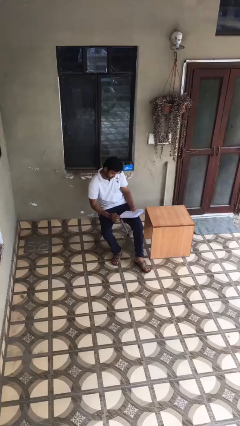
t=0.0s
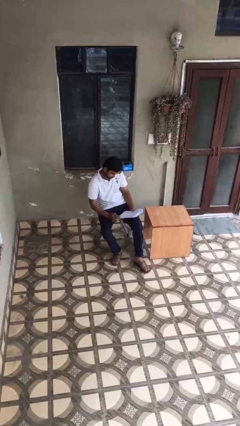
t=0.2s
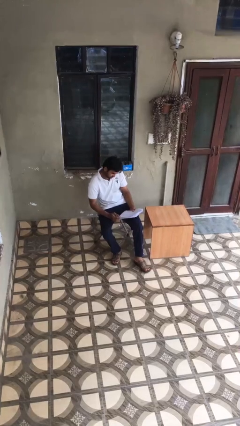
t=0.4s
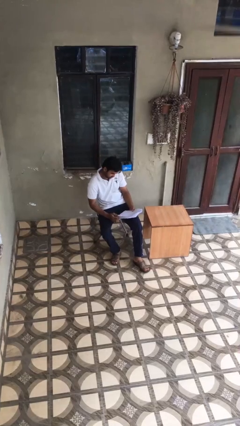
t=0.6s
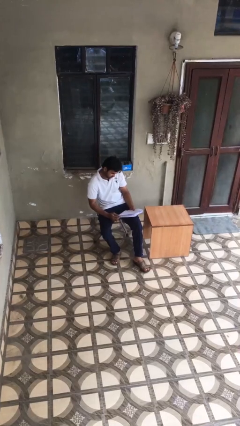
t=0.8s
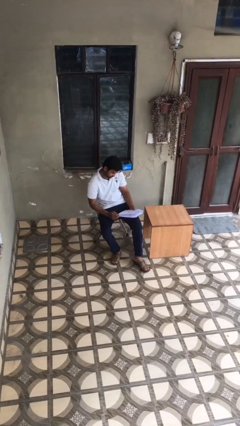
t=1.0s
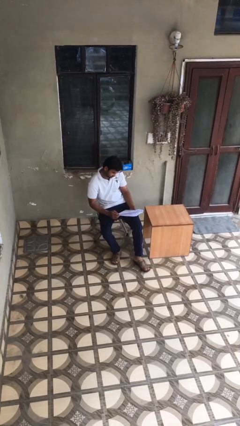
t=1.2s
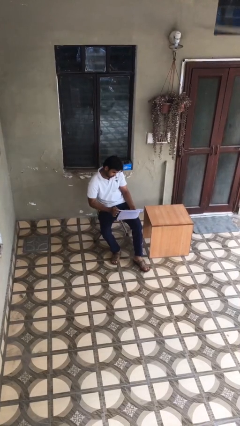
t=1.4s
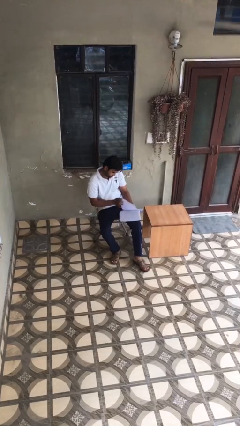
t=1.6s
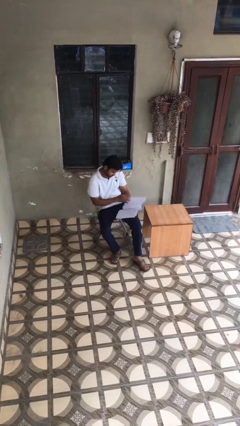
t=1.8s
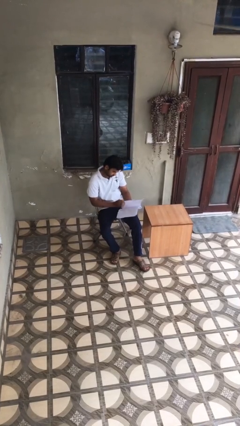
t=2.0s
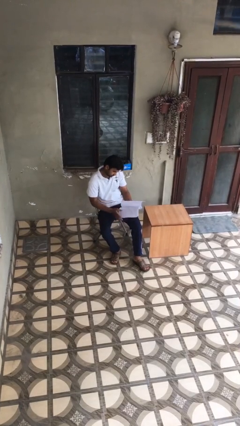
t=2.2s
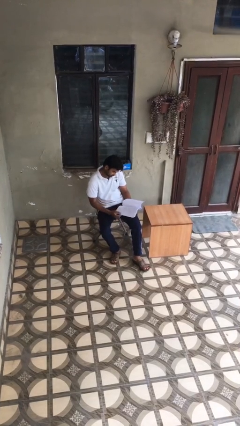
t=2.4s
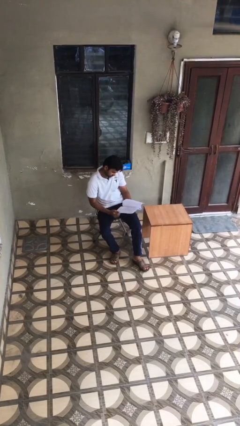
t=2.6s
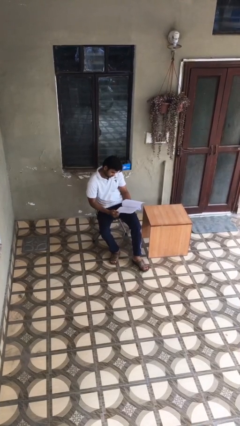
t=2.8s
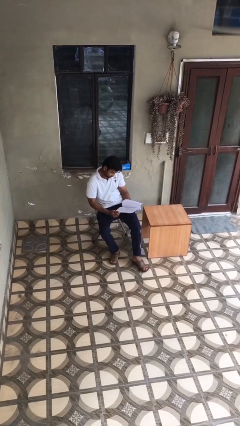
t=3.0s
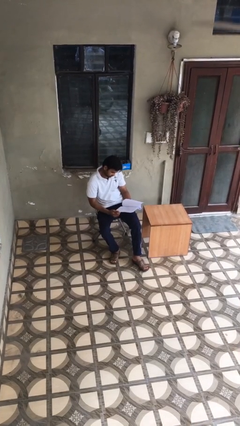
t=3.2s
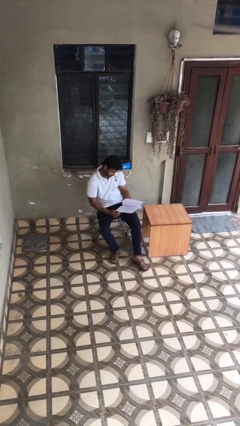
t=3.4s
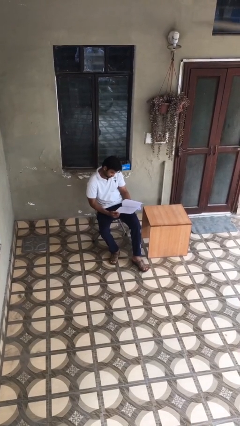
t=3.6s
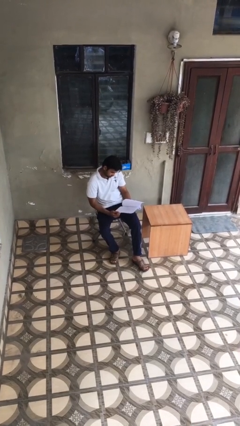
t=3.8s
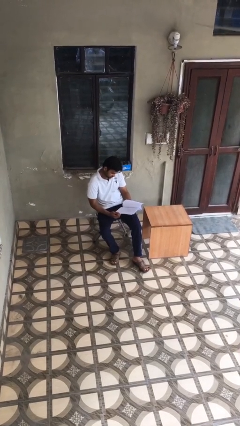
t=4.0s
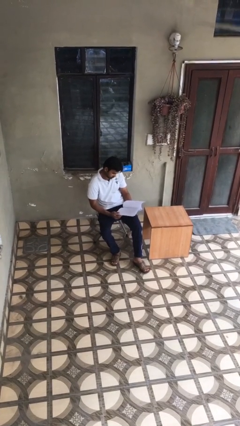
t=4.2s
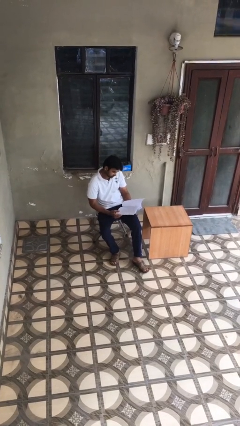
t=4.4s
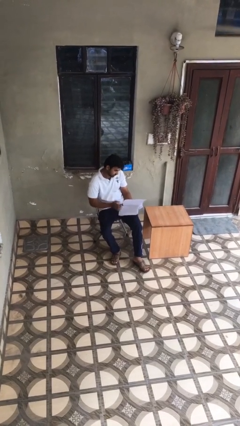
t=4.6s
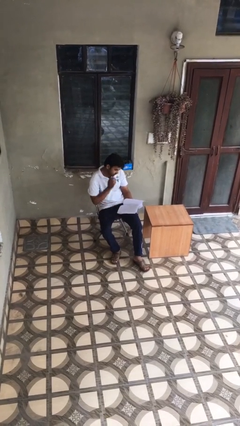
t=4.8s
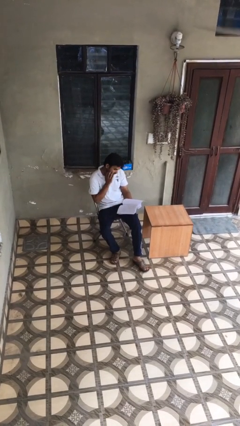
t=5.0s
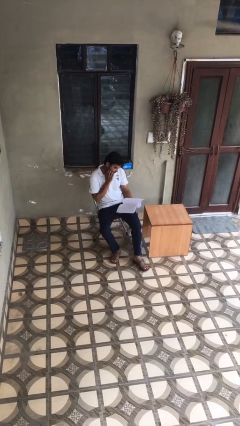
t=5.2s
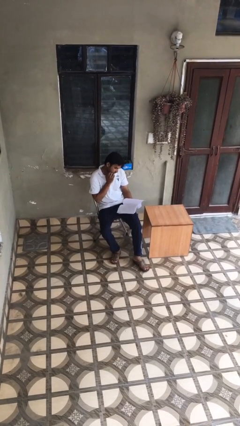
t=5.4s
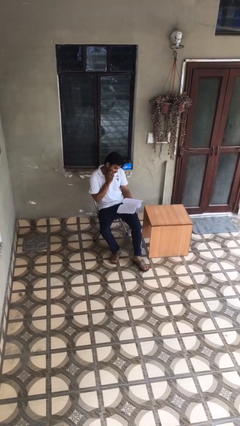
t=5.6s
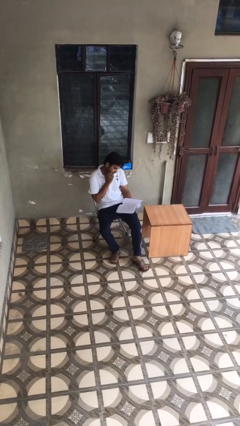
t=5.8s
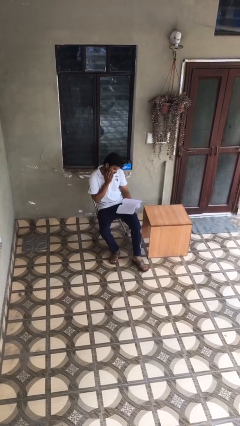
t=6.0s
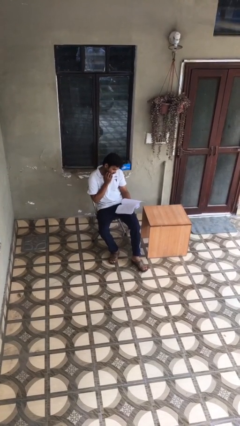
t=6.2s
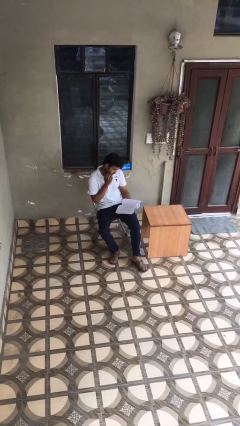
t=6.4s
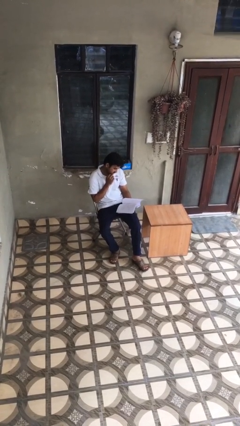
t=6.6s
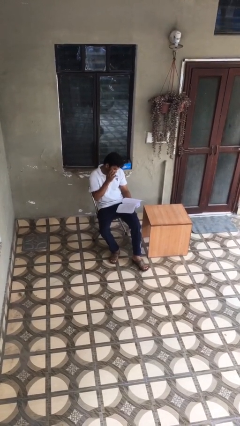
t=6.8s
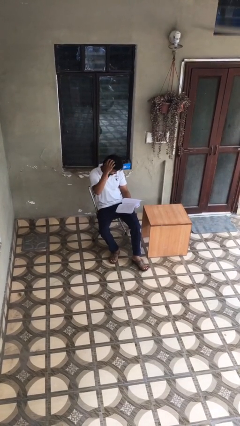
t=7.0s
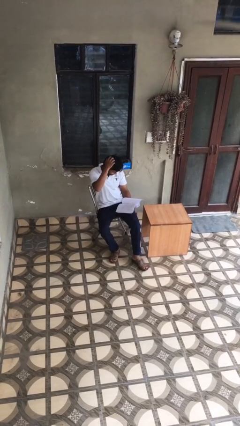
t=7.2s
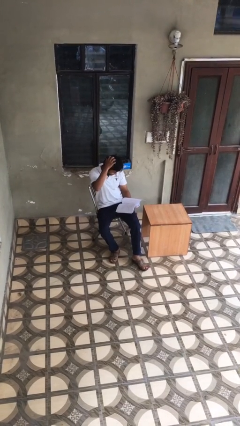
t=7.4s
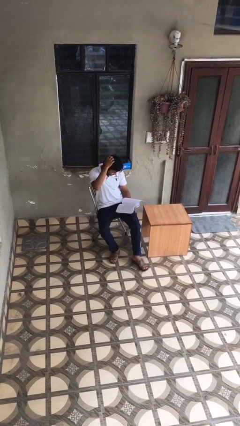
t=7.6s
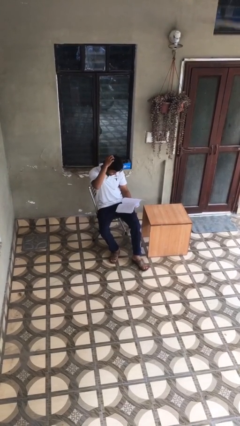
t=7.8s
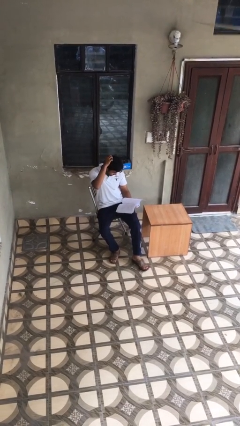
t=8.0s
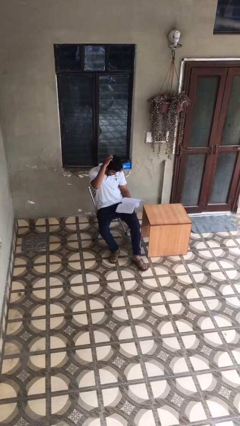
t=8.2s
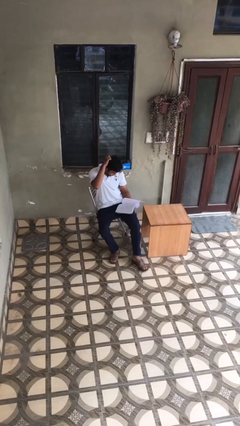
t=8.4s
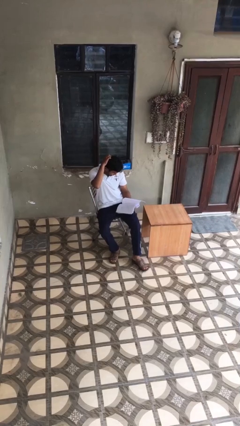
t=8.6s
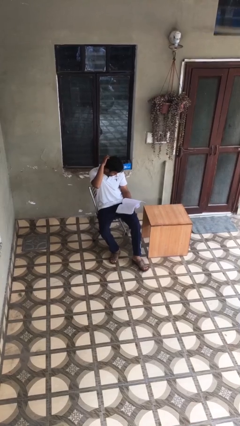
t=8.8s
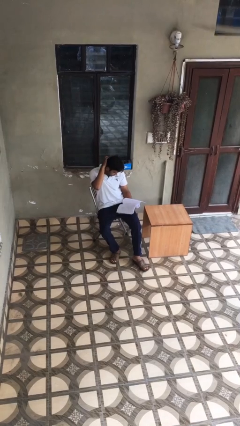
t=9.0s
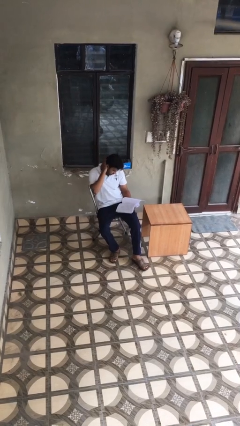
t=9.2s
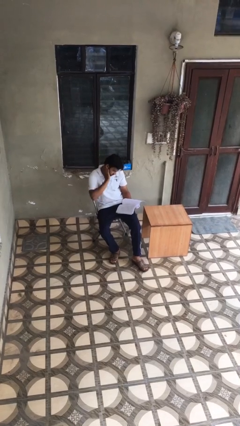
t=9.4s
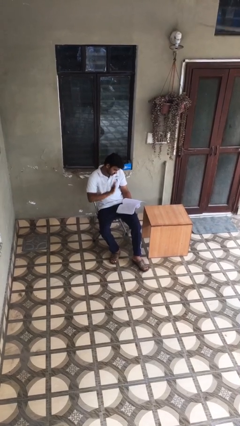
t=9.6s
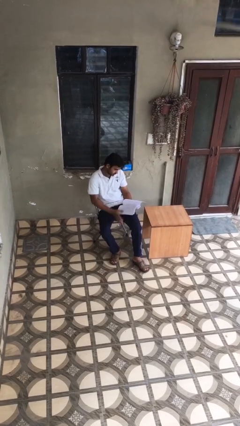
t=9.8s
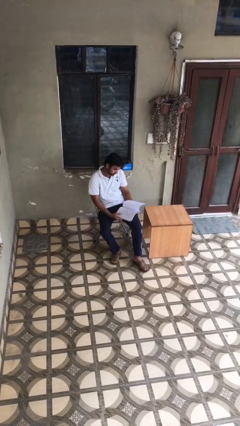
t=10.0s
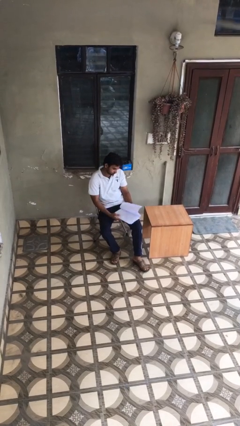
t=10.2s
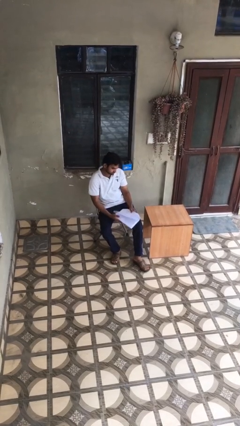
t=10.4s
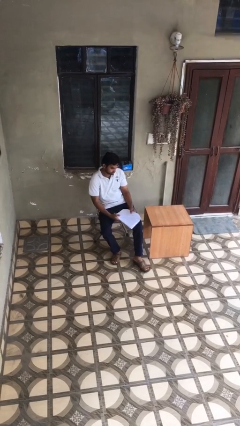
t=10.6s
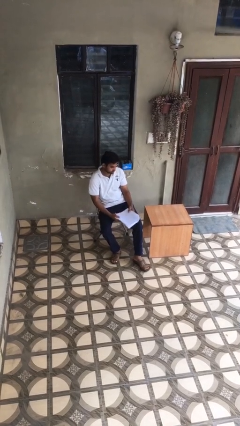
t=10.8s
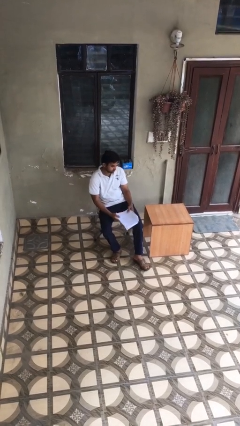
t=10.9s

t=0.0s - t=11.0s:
person reads document

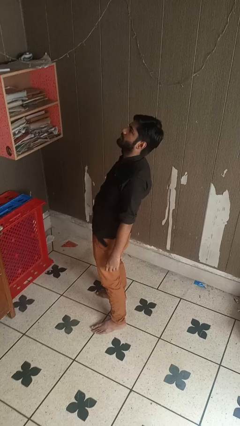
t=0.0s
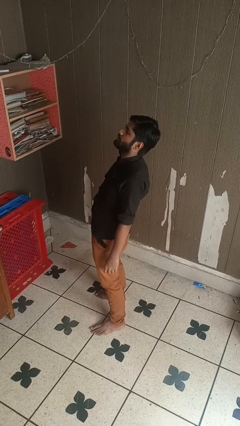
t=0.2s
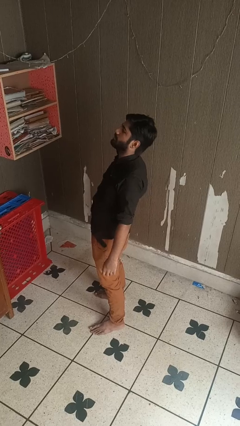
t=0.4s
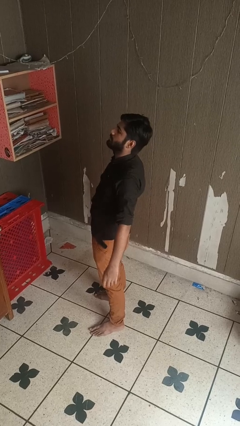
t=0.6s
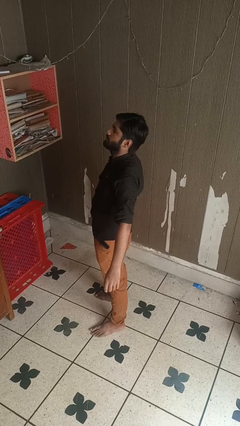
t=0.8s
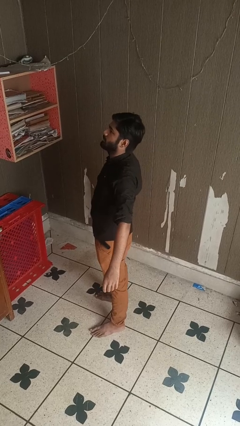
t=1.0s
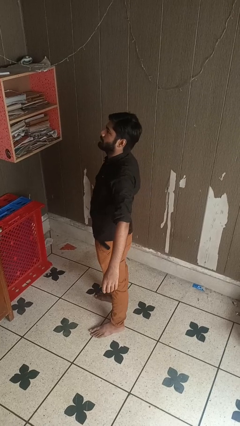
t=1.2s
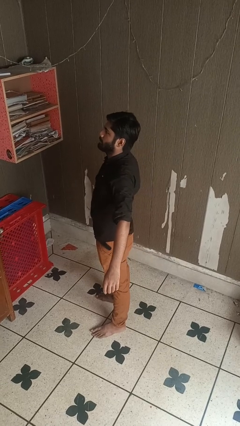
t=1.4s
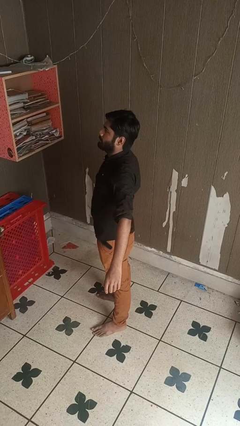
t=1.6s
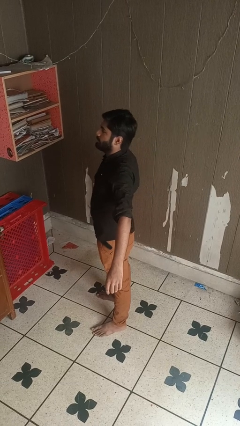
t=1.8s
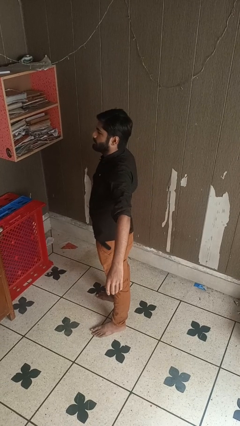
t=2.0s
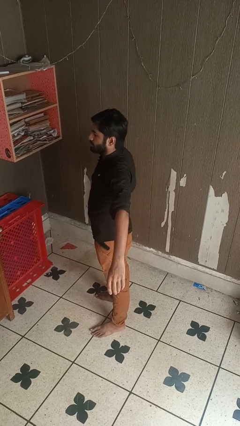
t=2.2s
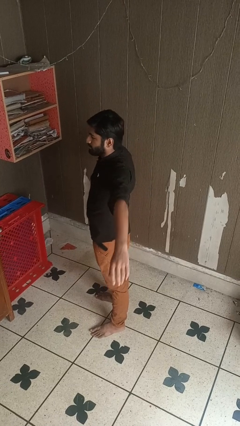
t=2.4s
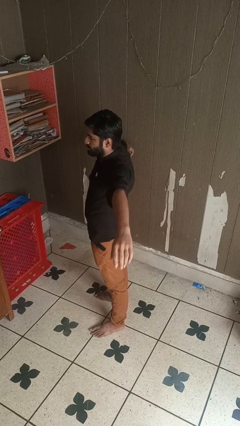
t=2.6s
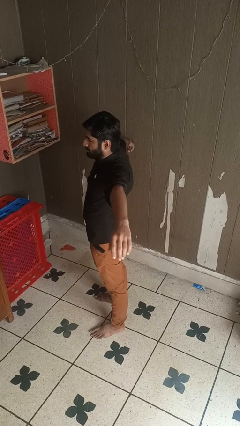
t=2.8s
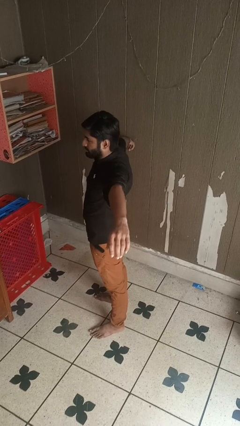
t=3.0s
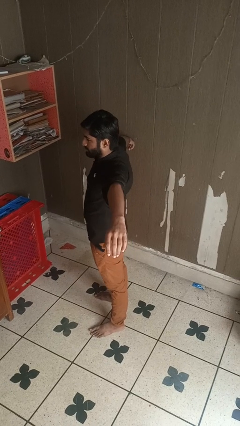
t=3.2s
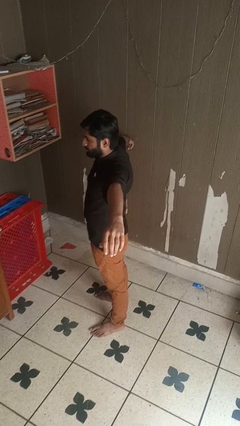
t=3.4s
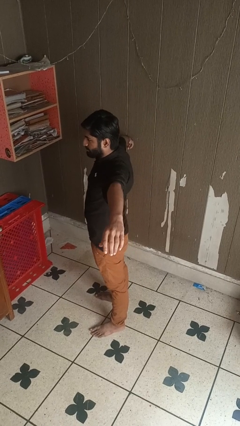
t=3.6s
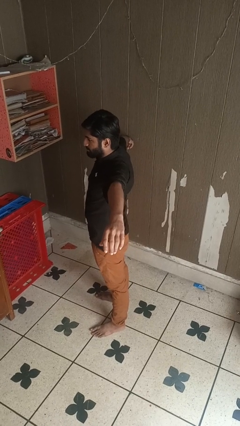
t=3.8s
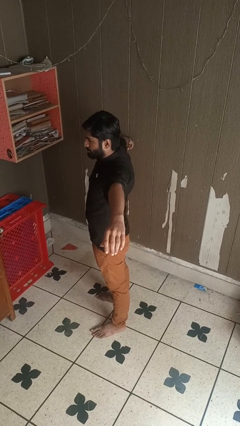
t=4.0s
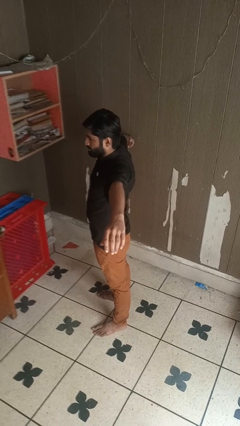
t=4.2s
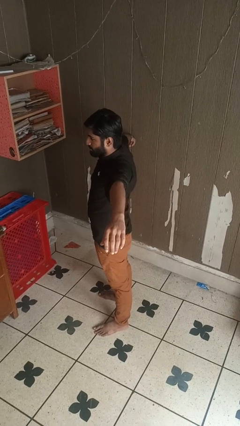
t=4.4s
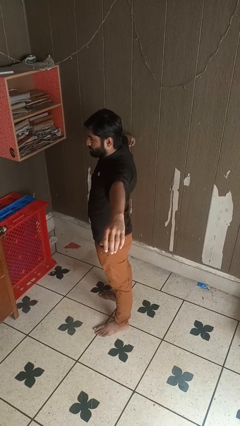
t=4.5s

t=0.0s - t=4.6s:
person stretches arms to side

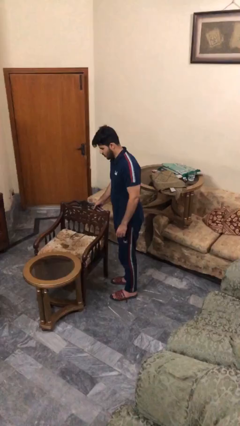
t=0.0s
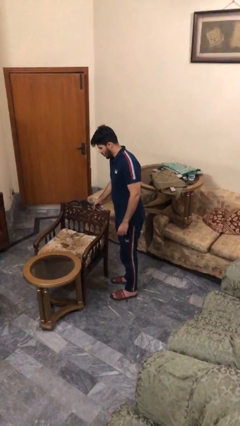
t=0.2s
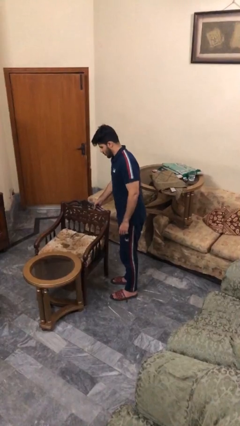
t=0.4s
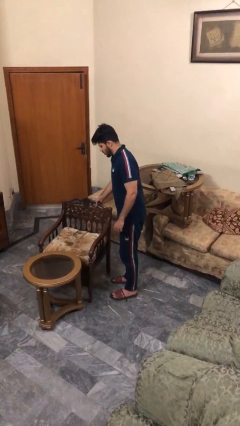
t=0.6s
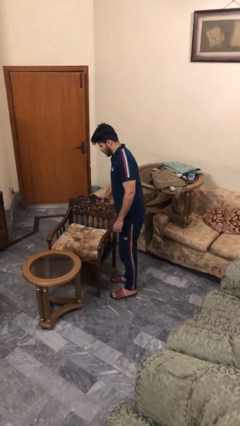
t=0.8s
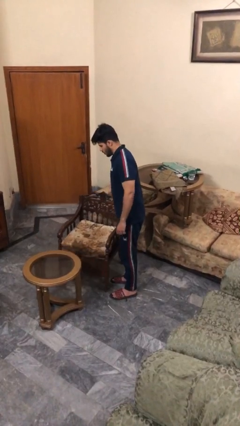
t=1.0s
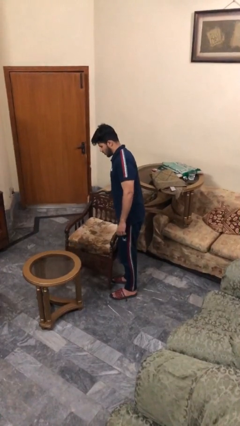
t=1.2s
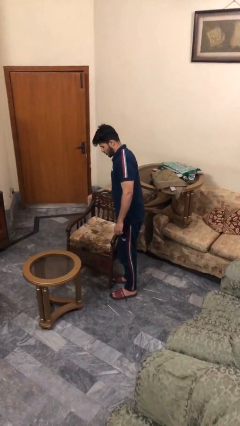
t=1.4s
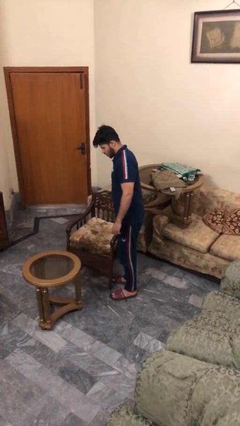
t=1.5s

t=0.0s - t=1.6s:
person pulls out chair

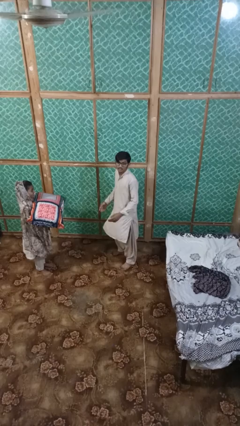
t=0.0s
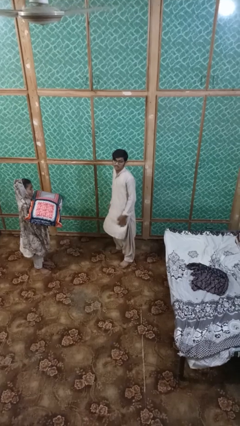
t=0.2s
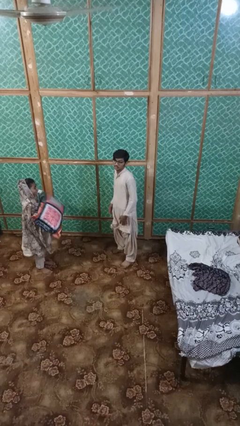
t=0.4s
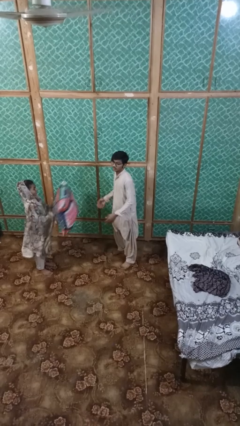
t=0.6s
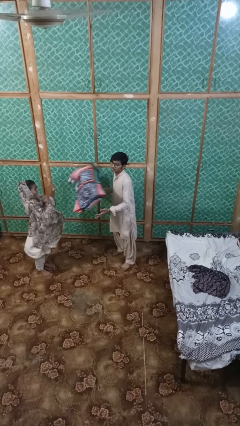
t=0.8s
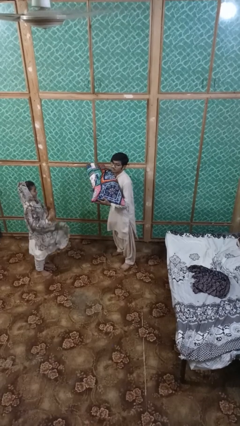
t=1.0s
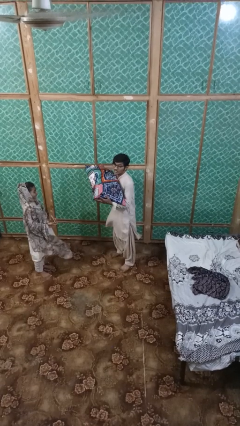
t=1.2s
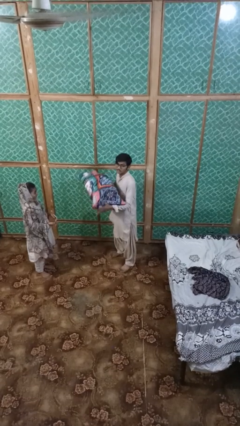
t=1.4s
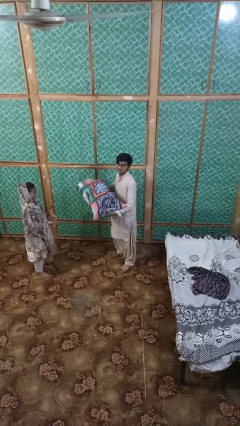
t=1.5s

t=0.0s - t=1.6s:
person catches object from person
